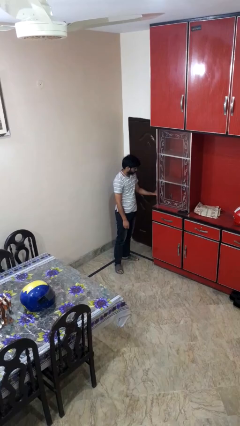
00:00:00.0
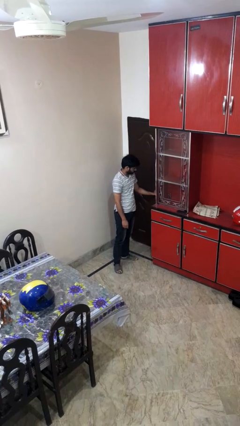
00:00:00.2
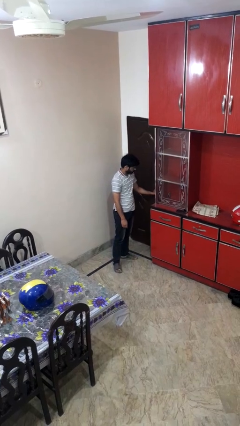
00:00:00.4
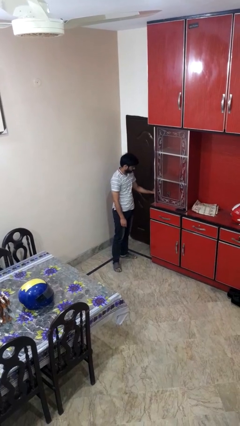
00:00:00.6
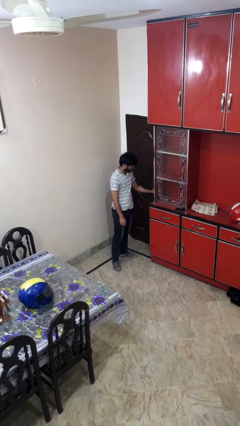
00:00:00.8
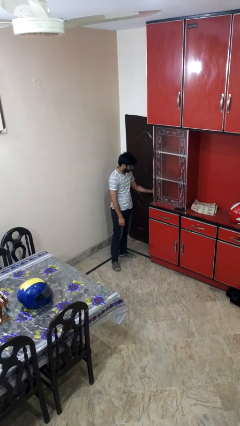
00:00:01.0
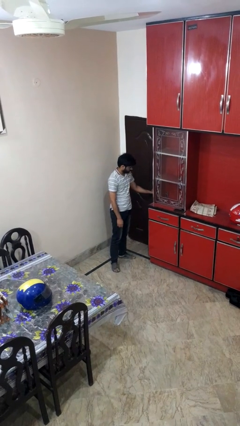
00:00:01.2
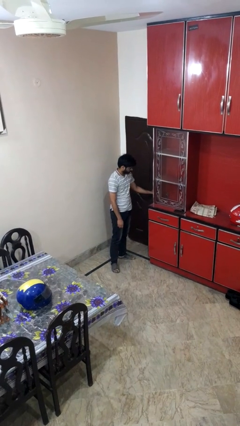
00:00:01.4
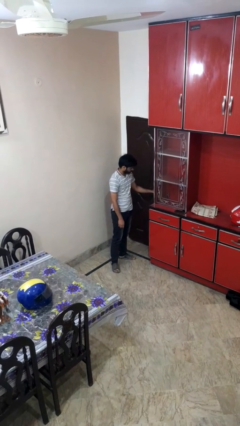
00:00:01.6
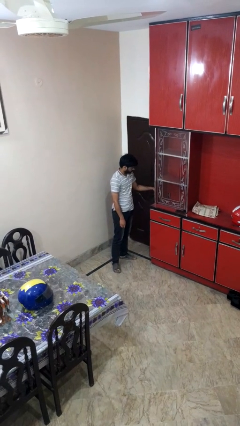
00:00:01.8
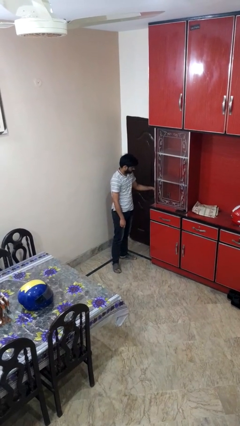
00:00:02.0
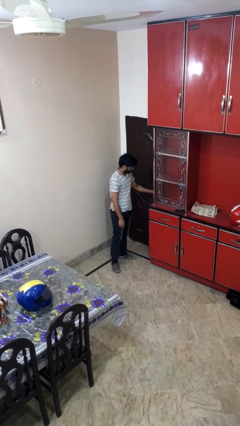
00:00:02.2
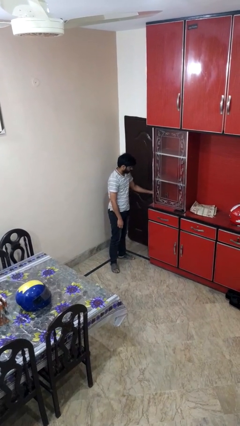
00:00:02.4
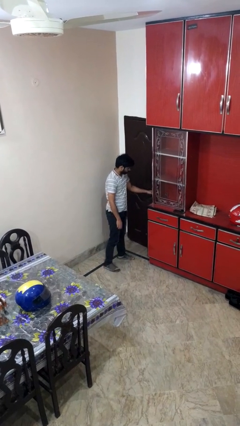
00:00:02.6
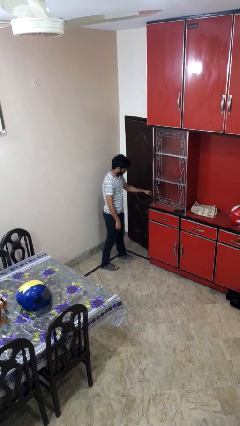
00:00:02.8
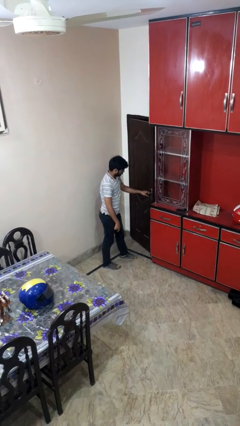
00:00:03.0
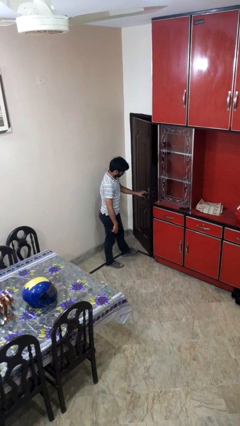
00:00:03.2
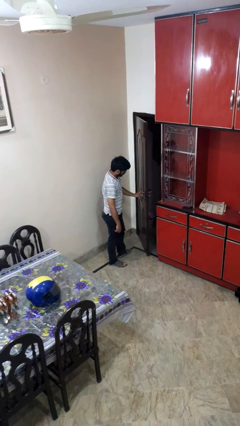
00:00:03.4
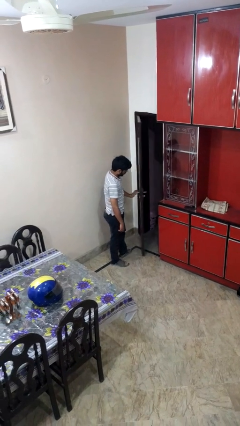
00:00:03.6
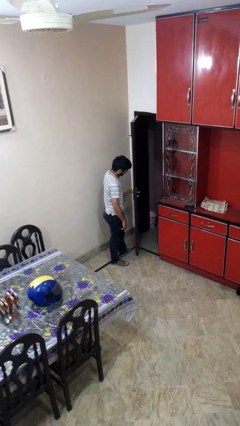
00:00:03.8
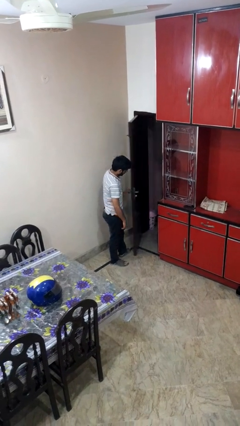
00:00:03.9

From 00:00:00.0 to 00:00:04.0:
person opens facility door

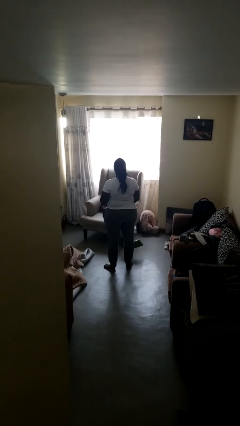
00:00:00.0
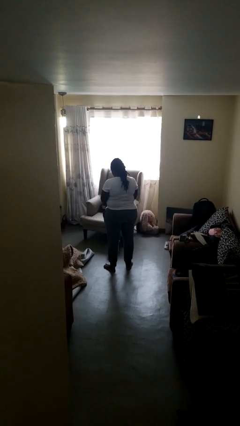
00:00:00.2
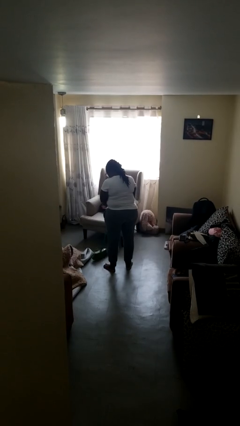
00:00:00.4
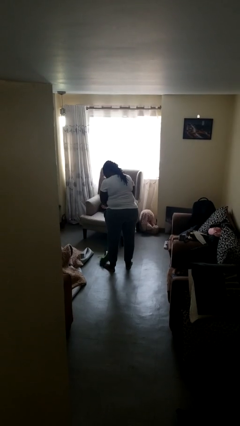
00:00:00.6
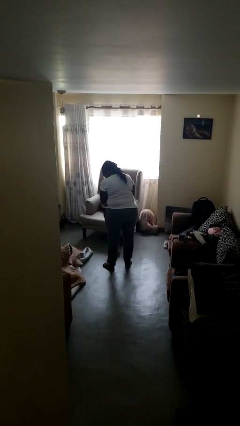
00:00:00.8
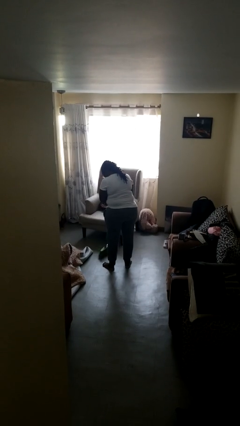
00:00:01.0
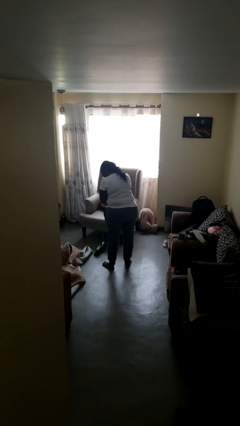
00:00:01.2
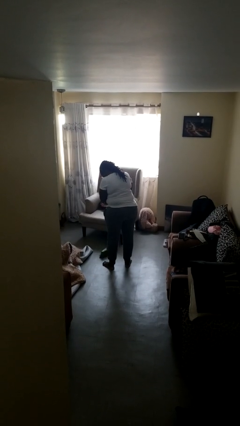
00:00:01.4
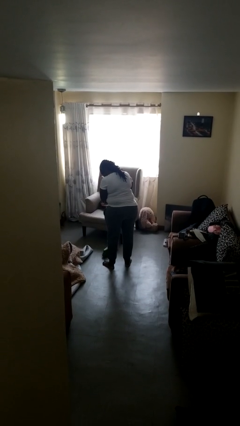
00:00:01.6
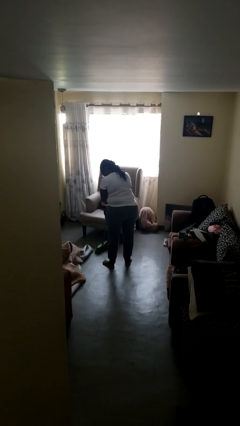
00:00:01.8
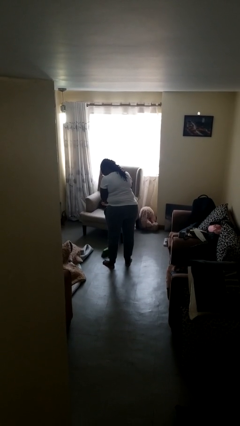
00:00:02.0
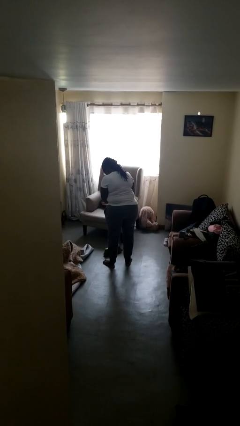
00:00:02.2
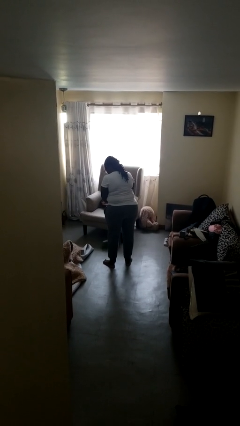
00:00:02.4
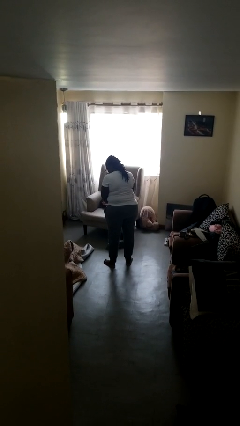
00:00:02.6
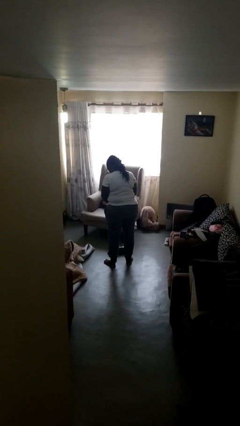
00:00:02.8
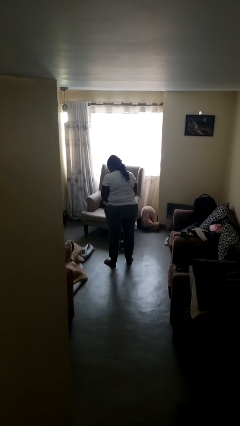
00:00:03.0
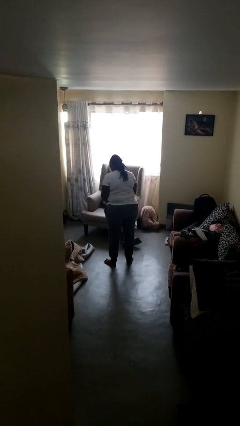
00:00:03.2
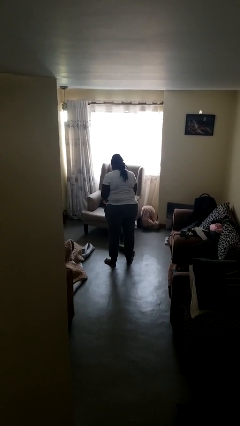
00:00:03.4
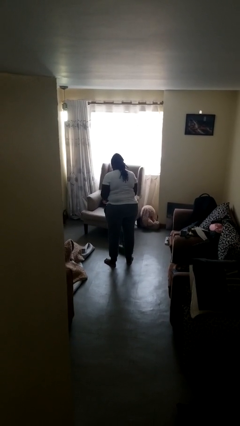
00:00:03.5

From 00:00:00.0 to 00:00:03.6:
person sweeps floor

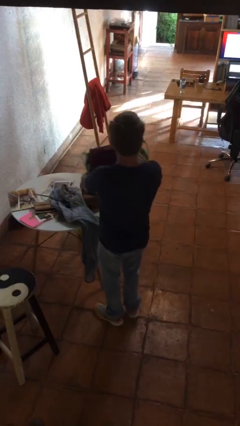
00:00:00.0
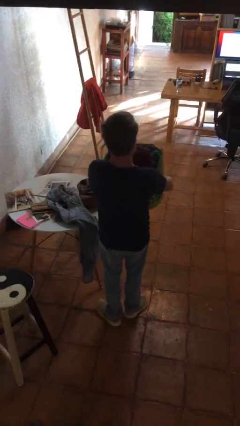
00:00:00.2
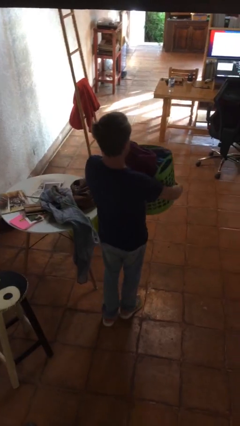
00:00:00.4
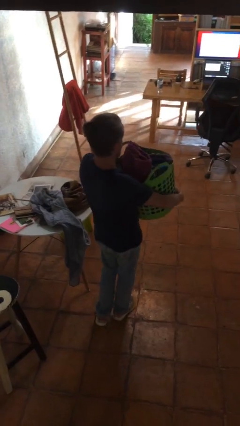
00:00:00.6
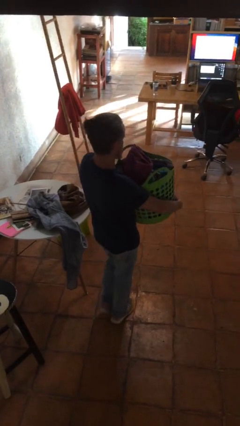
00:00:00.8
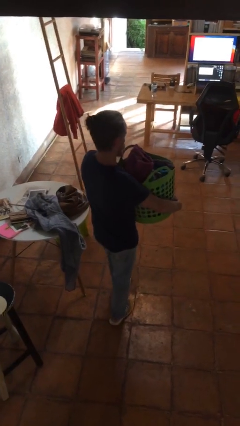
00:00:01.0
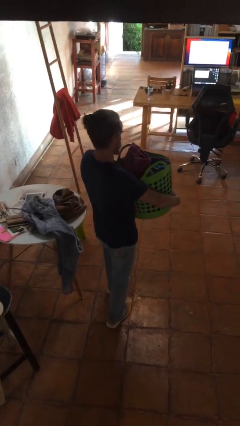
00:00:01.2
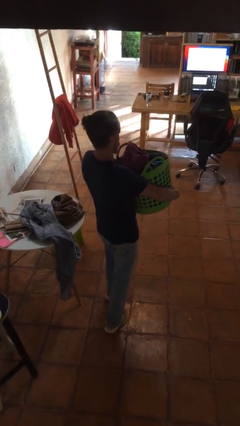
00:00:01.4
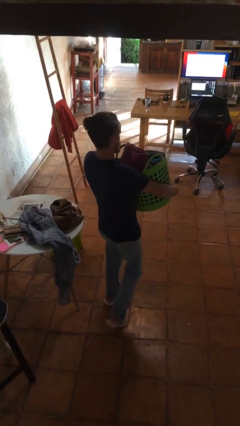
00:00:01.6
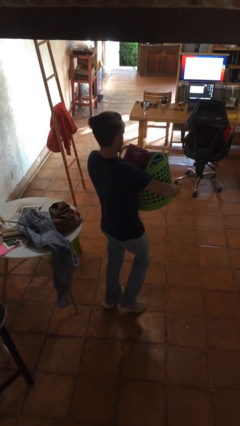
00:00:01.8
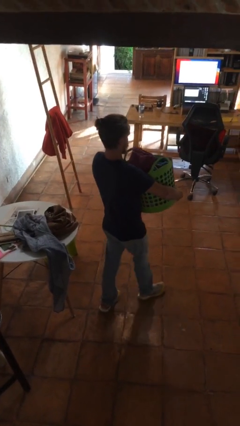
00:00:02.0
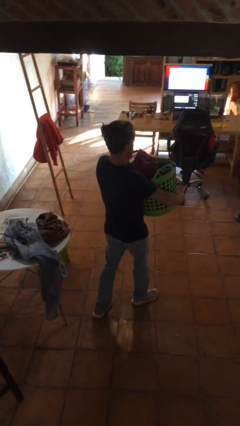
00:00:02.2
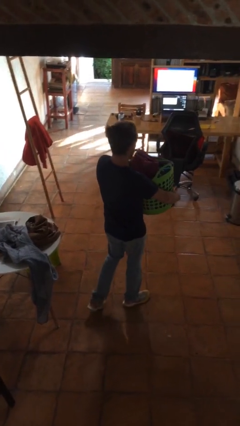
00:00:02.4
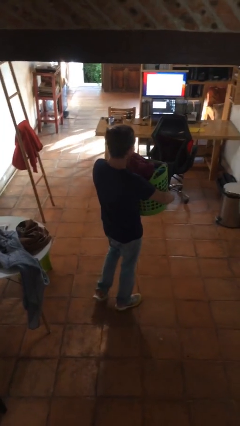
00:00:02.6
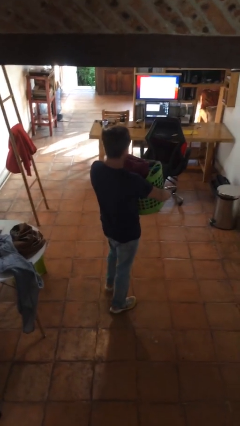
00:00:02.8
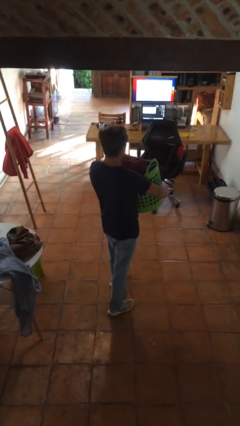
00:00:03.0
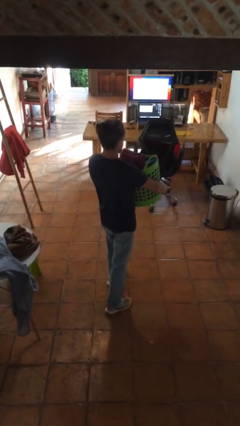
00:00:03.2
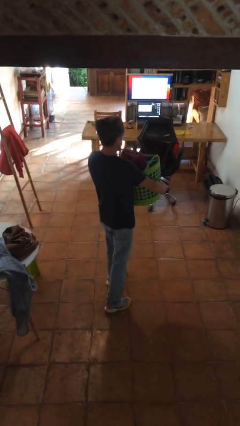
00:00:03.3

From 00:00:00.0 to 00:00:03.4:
person carries laundry basket

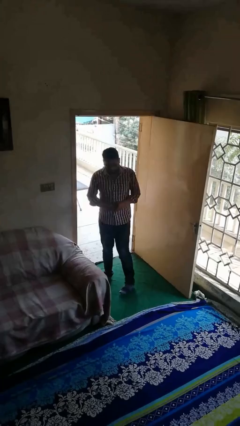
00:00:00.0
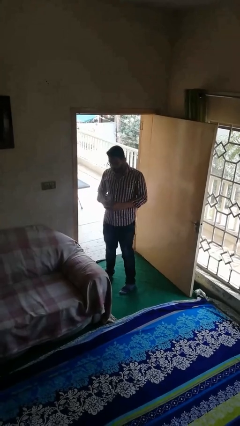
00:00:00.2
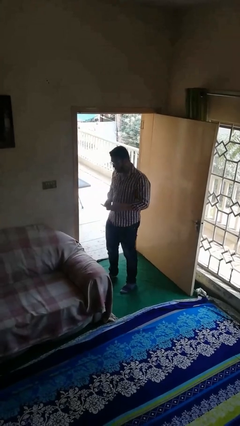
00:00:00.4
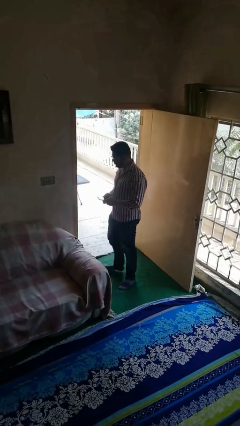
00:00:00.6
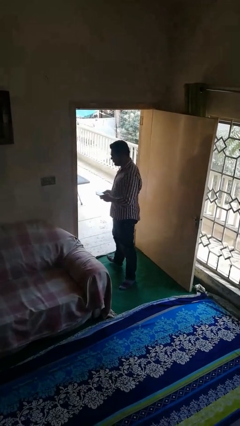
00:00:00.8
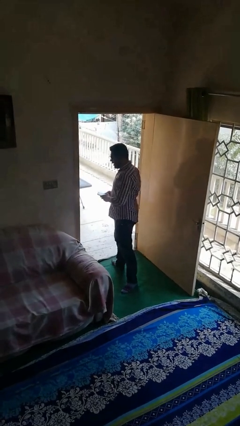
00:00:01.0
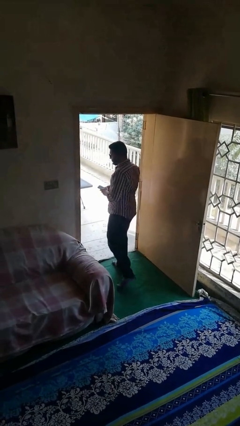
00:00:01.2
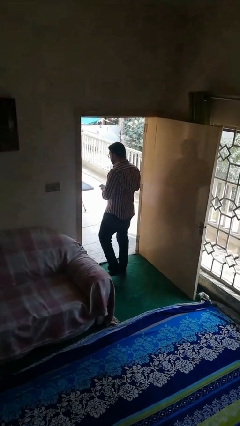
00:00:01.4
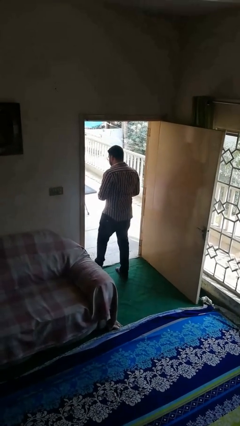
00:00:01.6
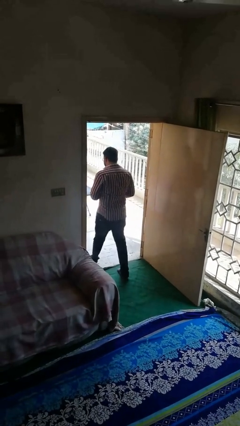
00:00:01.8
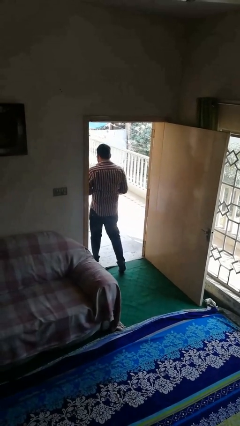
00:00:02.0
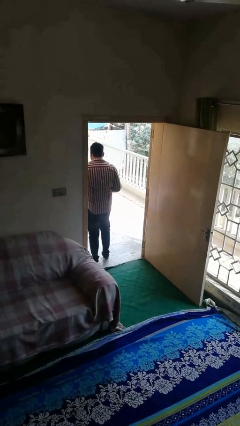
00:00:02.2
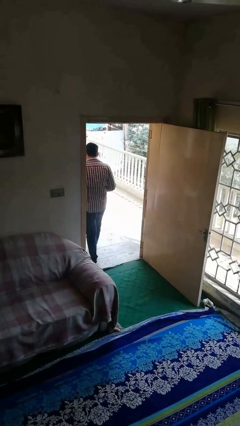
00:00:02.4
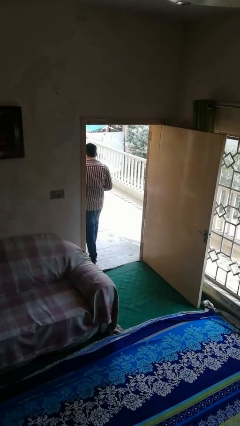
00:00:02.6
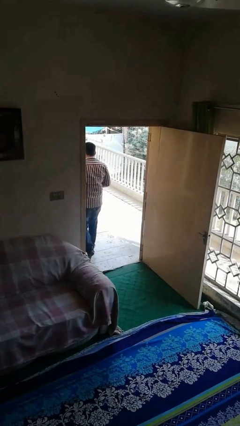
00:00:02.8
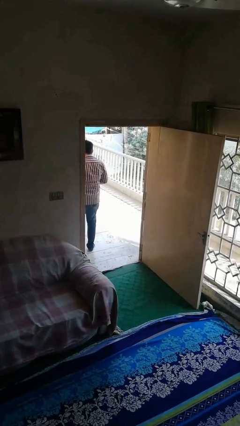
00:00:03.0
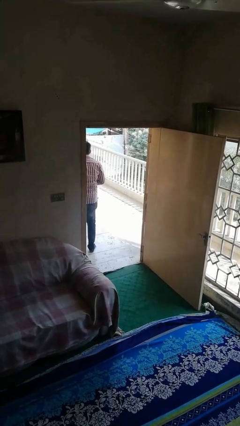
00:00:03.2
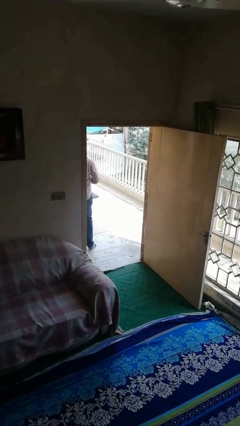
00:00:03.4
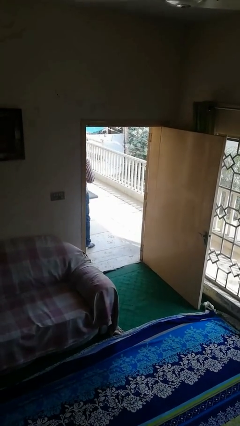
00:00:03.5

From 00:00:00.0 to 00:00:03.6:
person exits scene through structure

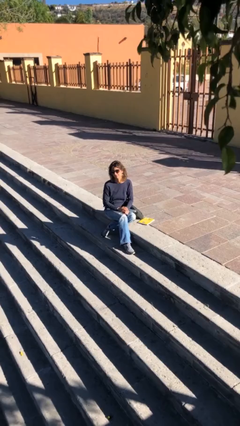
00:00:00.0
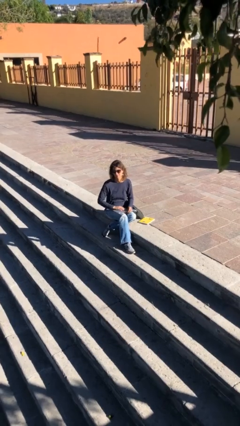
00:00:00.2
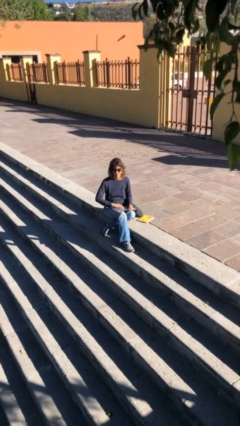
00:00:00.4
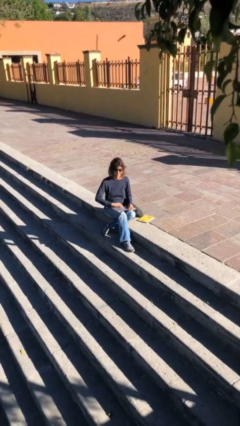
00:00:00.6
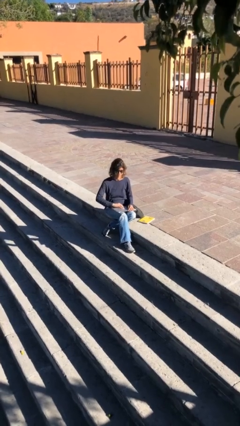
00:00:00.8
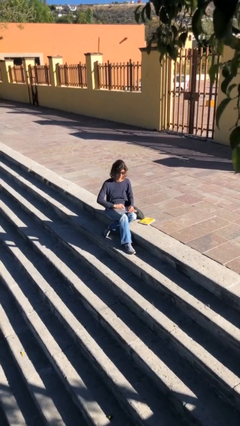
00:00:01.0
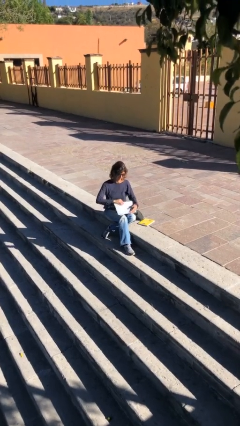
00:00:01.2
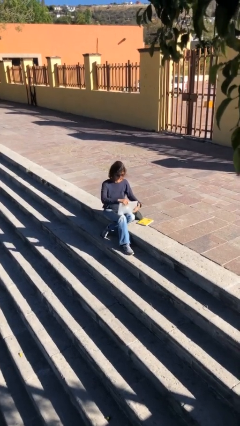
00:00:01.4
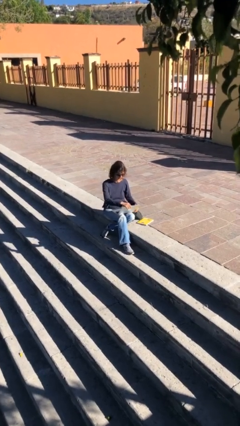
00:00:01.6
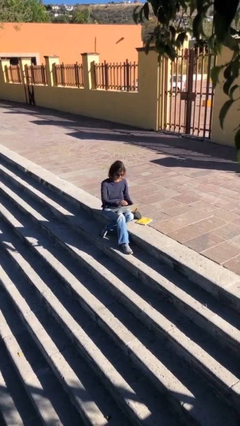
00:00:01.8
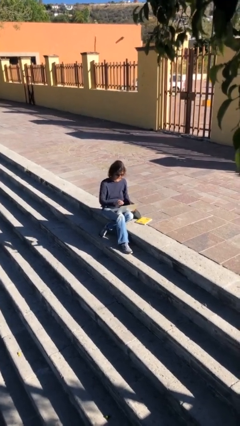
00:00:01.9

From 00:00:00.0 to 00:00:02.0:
person interacts with laptop

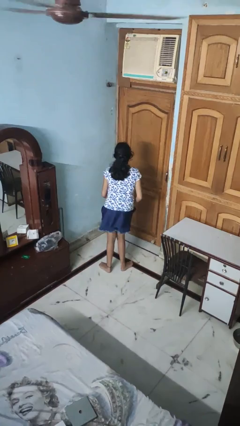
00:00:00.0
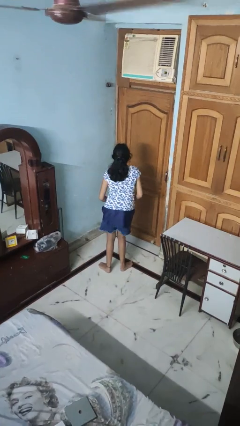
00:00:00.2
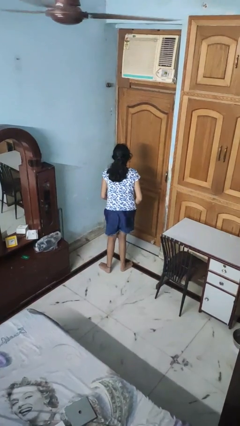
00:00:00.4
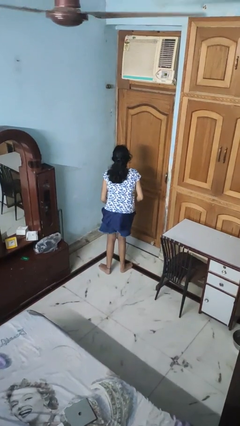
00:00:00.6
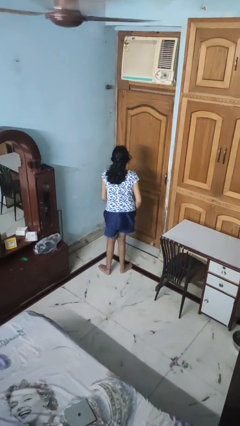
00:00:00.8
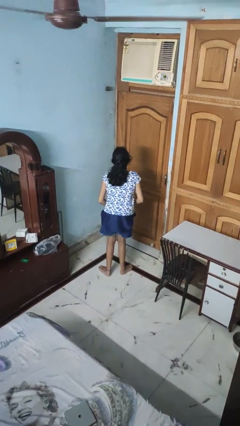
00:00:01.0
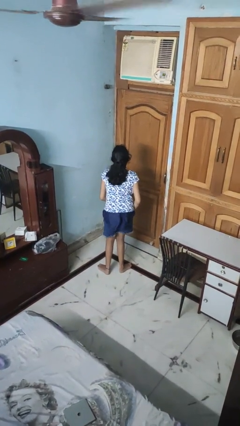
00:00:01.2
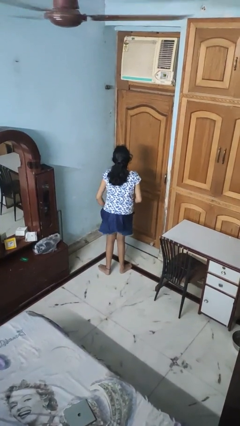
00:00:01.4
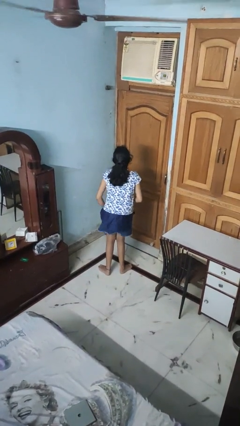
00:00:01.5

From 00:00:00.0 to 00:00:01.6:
person wiggles hips
